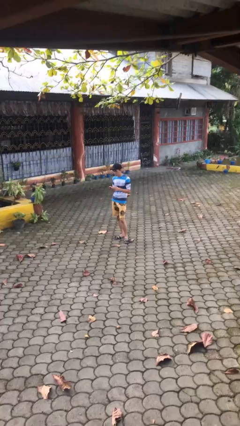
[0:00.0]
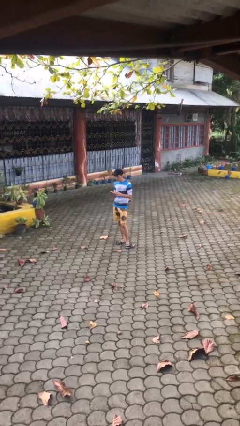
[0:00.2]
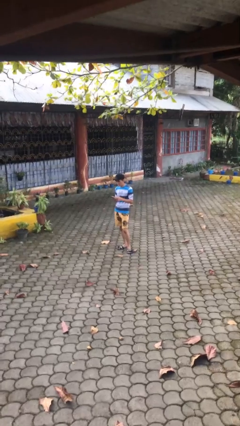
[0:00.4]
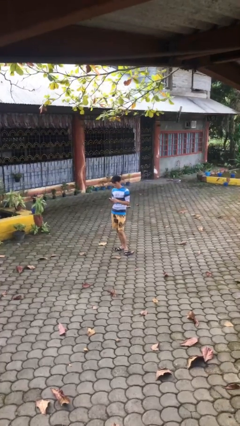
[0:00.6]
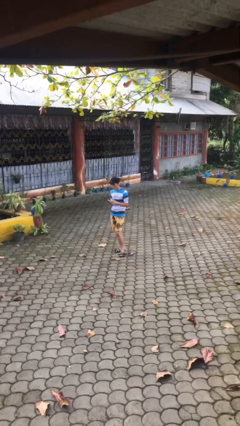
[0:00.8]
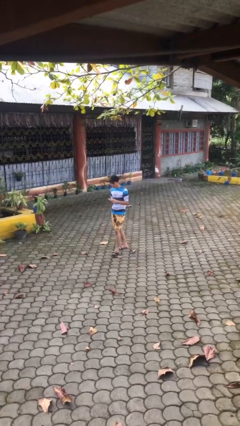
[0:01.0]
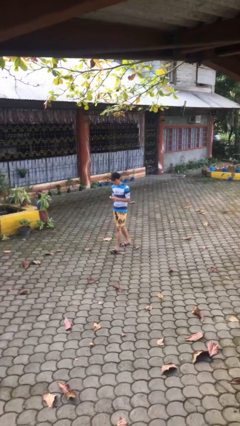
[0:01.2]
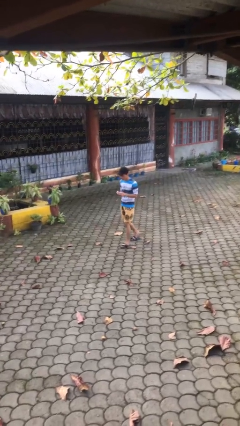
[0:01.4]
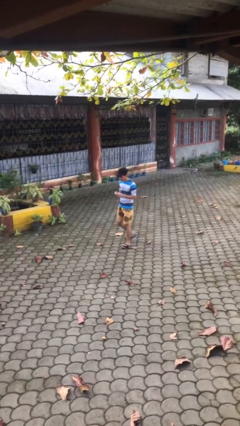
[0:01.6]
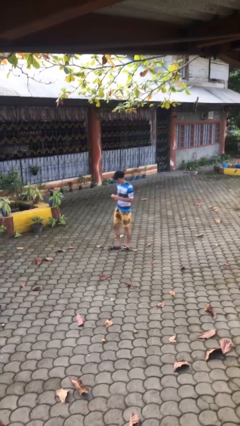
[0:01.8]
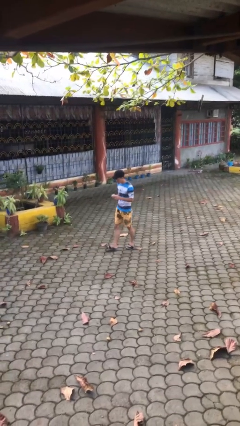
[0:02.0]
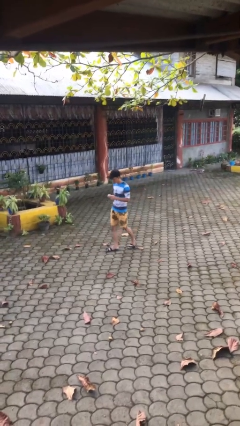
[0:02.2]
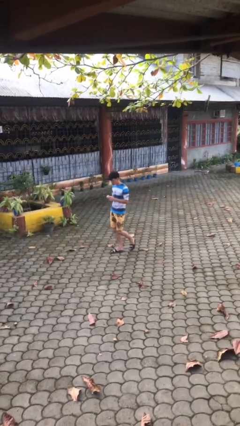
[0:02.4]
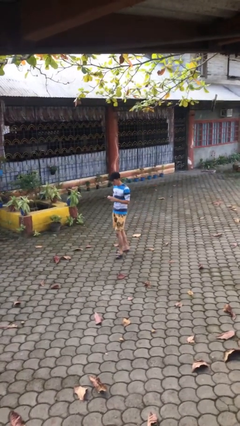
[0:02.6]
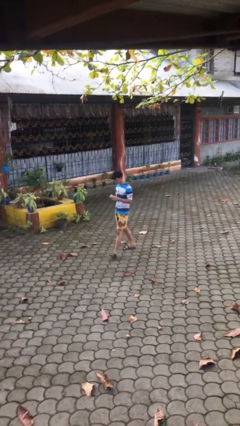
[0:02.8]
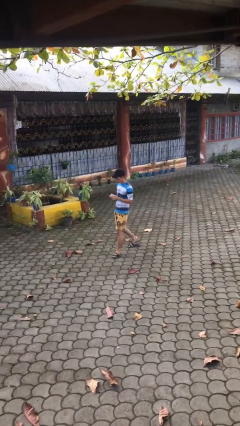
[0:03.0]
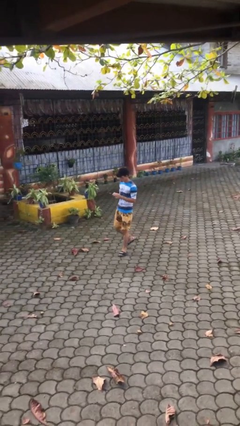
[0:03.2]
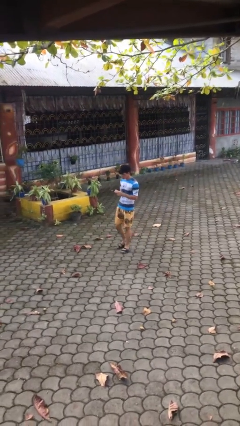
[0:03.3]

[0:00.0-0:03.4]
person texts on phone

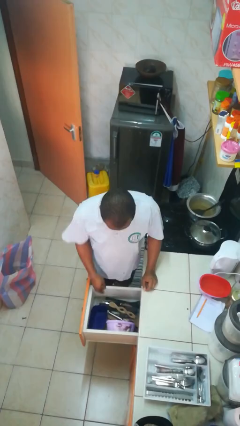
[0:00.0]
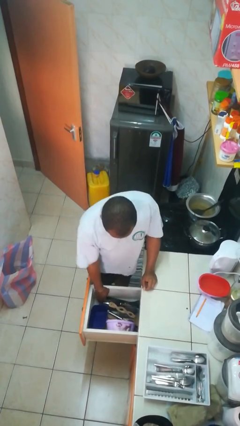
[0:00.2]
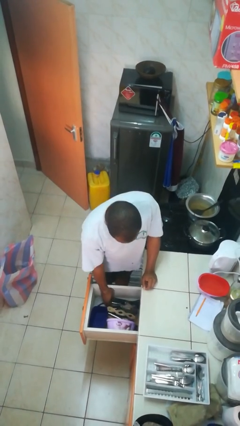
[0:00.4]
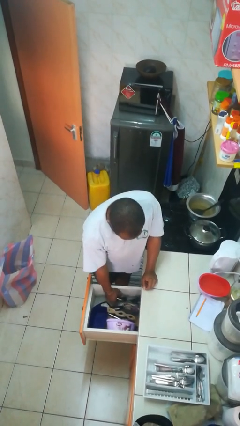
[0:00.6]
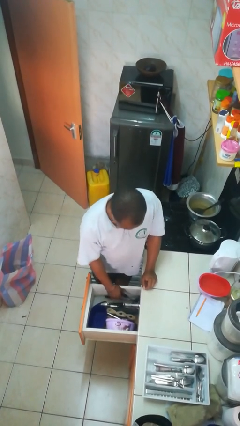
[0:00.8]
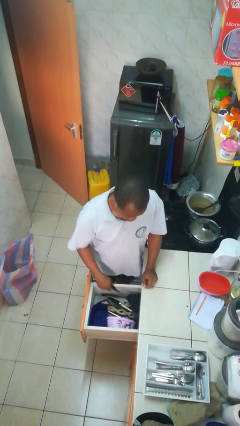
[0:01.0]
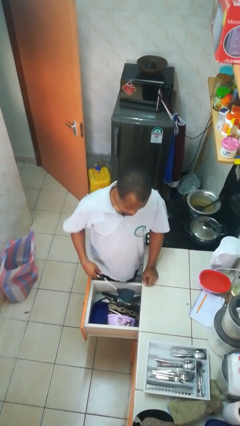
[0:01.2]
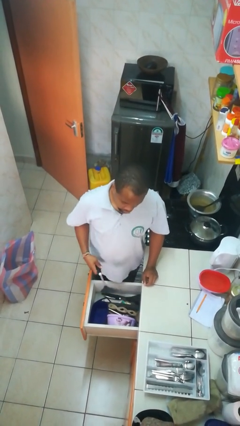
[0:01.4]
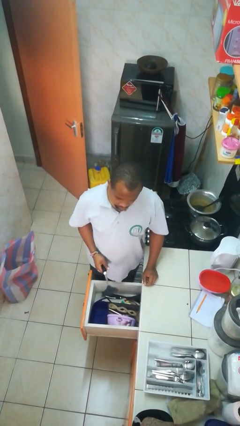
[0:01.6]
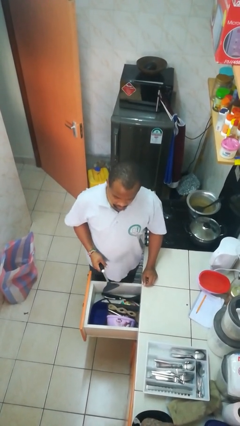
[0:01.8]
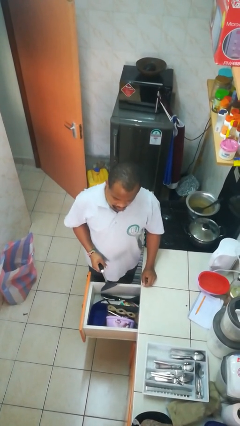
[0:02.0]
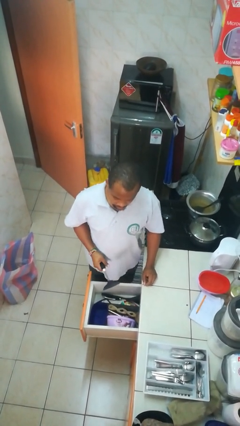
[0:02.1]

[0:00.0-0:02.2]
person takes object from kitchen drawer

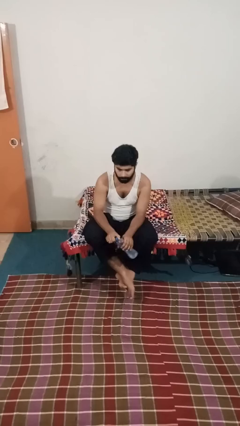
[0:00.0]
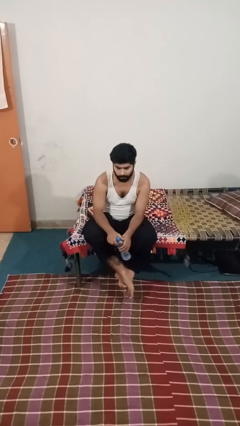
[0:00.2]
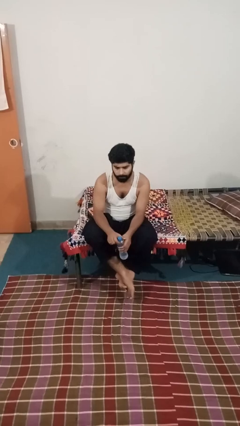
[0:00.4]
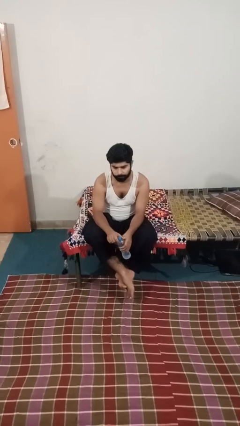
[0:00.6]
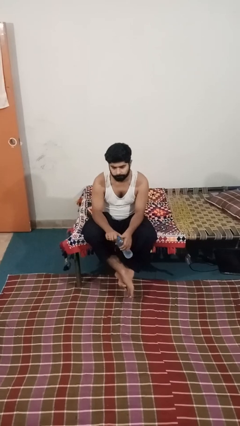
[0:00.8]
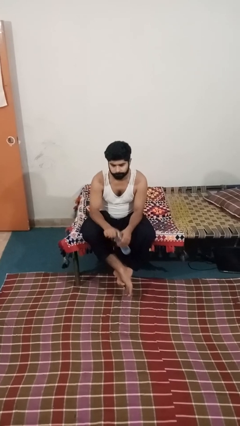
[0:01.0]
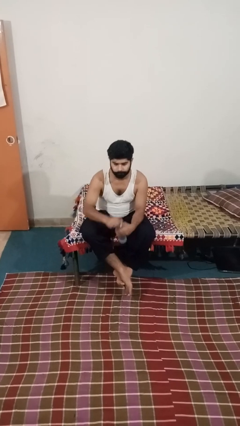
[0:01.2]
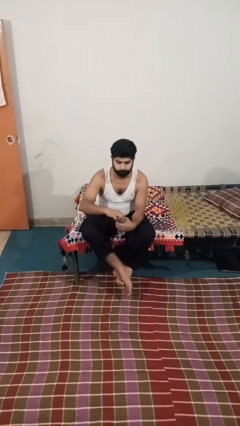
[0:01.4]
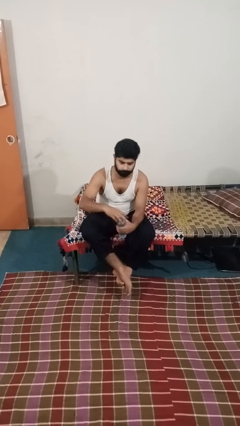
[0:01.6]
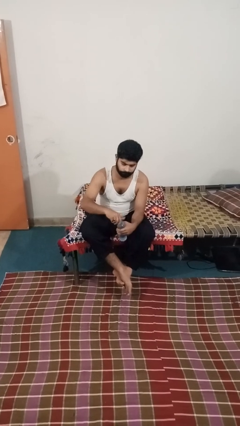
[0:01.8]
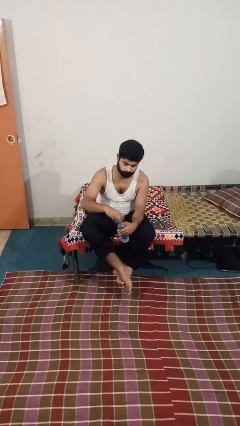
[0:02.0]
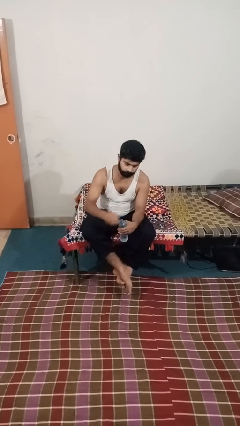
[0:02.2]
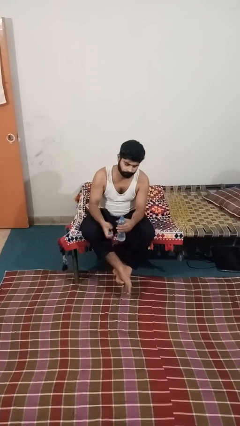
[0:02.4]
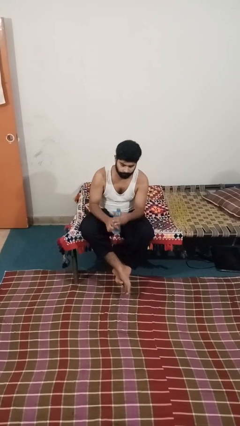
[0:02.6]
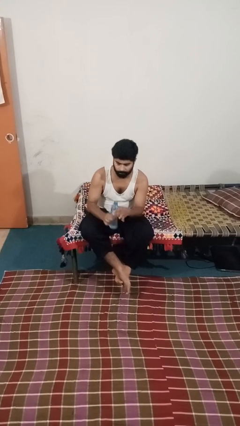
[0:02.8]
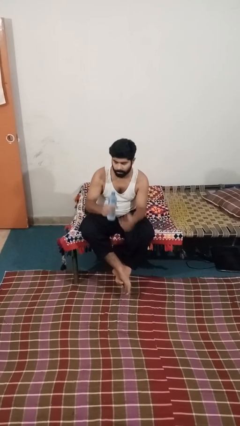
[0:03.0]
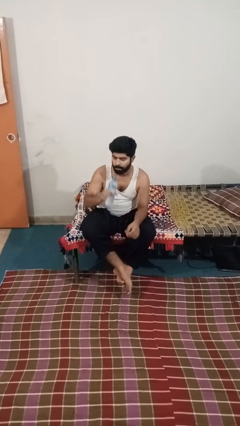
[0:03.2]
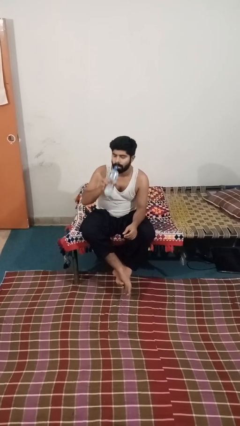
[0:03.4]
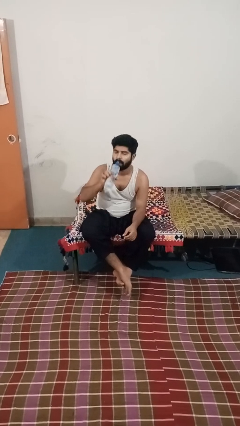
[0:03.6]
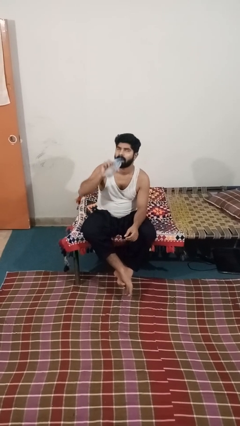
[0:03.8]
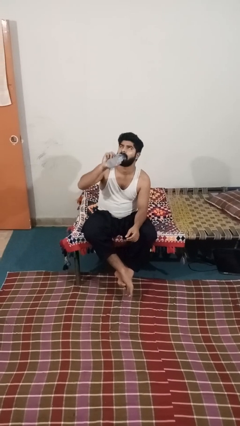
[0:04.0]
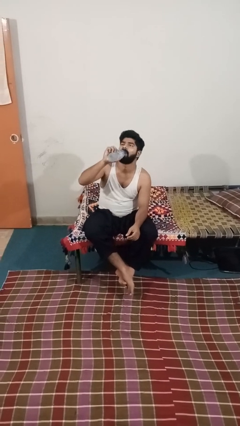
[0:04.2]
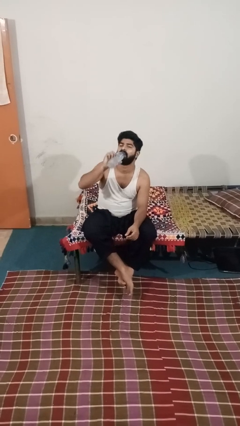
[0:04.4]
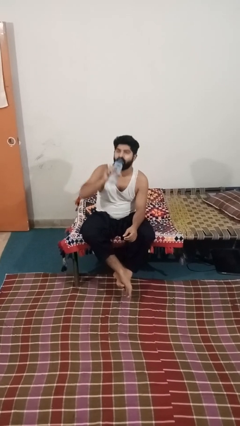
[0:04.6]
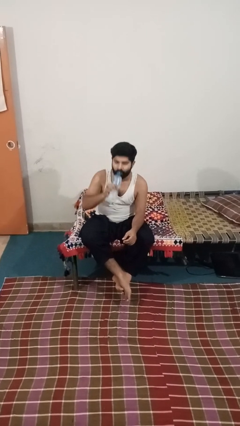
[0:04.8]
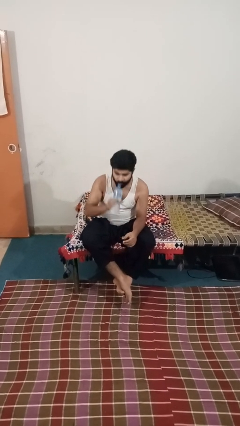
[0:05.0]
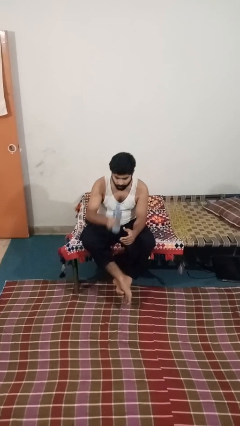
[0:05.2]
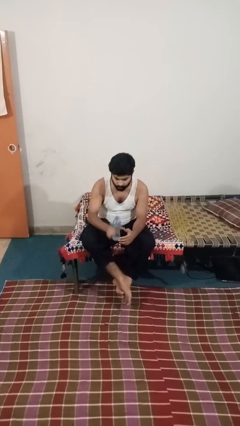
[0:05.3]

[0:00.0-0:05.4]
person drinks from bottle

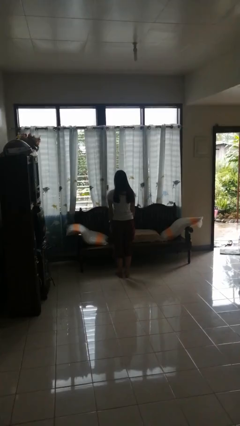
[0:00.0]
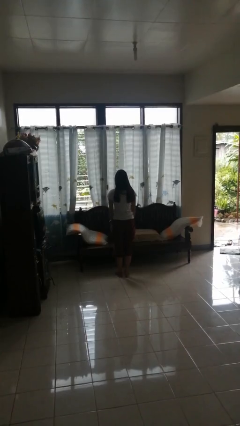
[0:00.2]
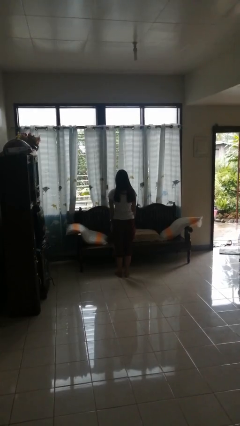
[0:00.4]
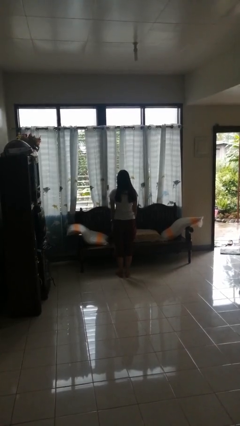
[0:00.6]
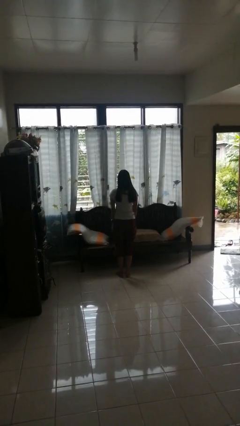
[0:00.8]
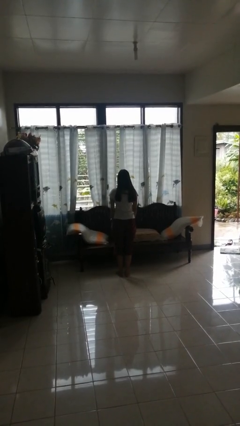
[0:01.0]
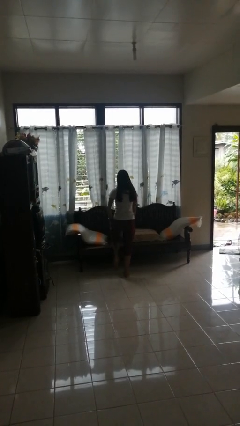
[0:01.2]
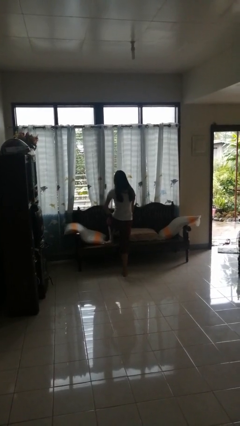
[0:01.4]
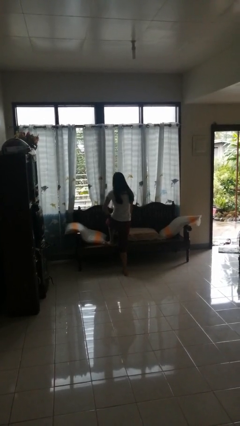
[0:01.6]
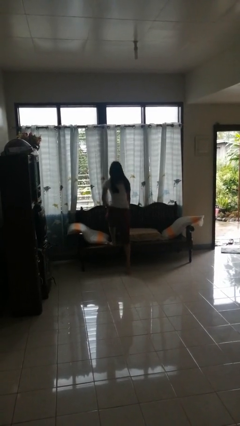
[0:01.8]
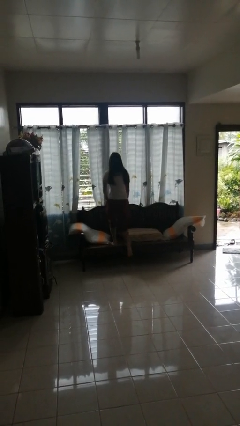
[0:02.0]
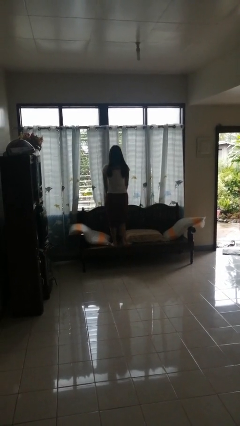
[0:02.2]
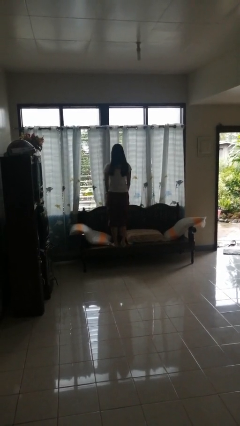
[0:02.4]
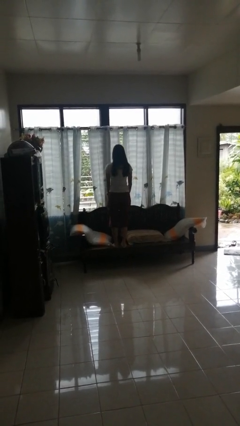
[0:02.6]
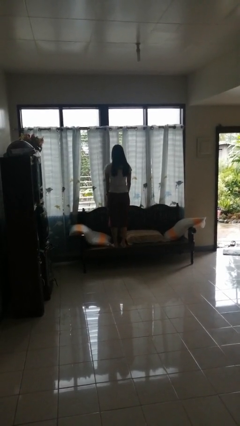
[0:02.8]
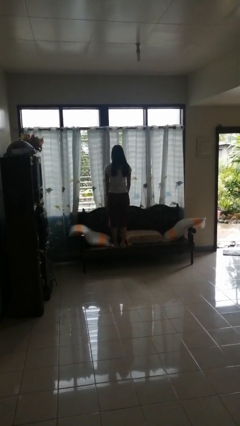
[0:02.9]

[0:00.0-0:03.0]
person climbs on couch

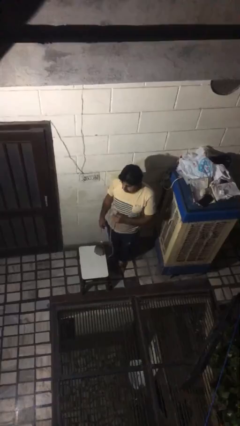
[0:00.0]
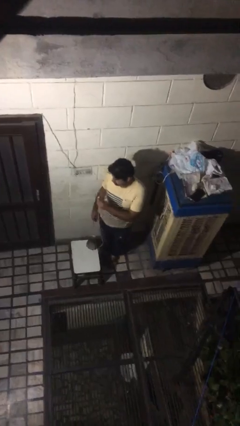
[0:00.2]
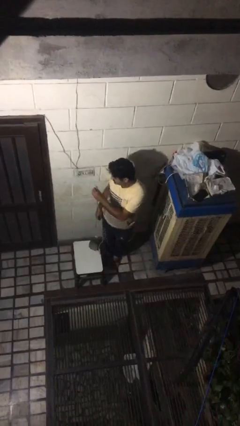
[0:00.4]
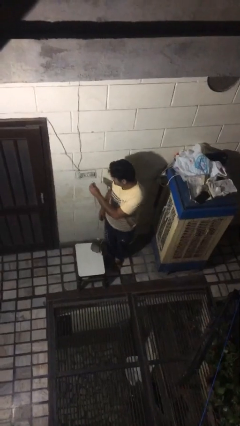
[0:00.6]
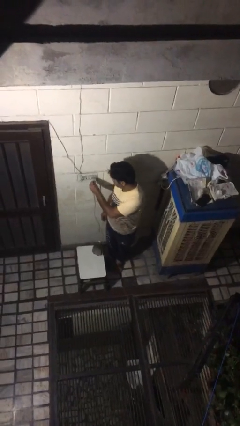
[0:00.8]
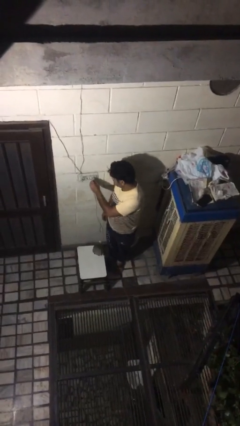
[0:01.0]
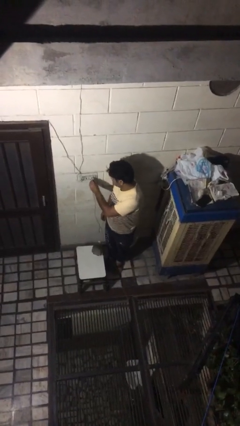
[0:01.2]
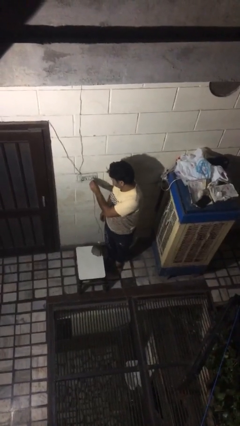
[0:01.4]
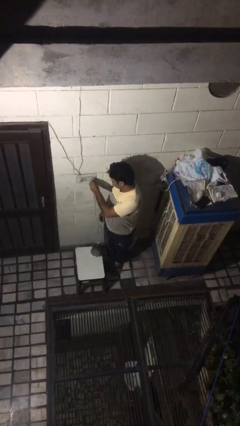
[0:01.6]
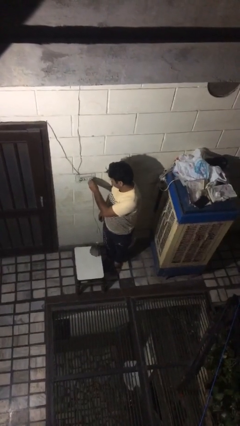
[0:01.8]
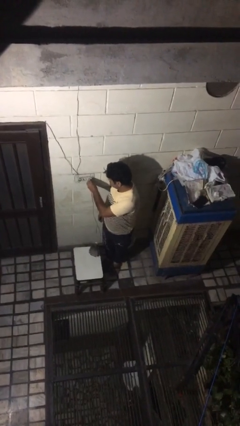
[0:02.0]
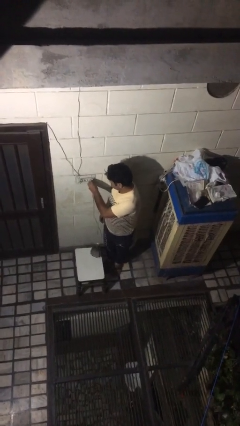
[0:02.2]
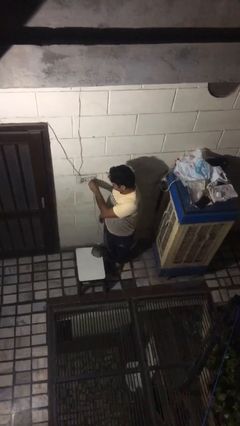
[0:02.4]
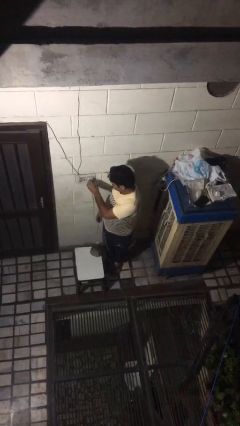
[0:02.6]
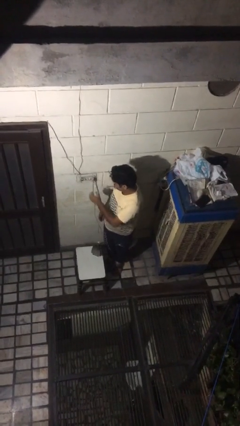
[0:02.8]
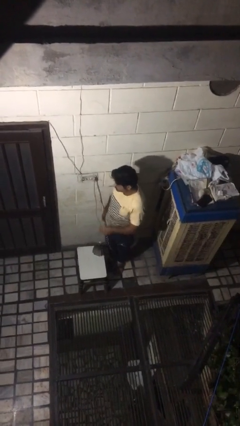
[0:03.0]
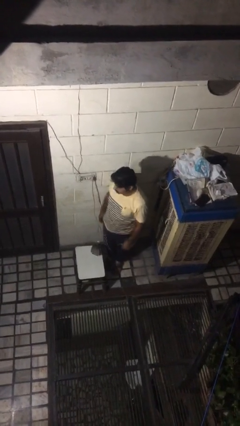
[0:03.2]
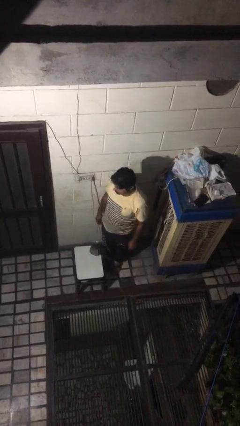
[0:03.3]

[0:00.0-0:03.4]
person plugs into electrical socket

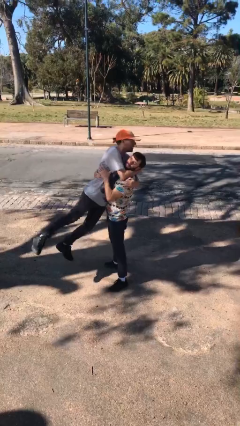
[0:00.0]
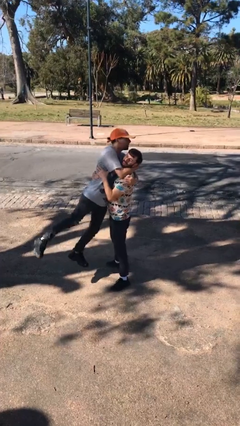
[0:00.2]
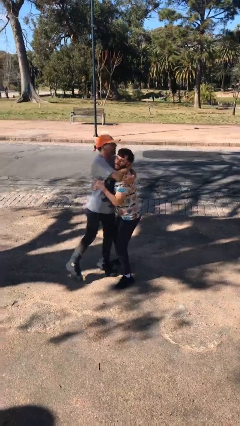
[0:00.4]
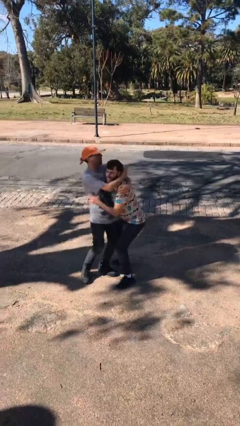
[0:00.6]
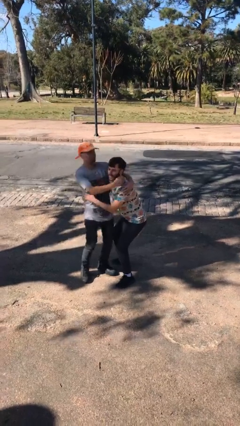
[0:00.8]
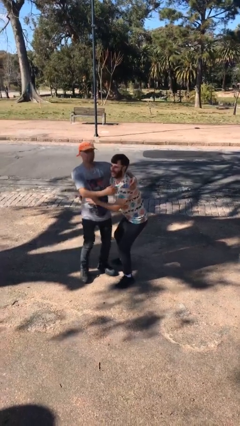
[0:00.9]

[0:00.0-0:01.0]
person puts down person
